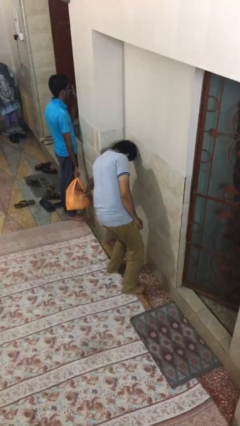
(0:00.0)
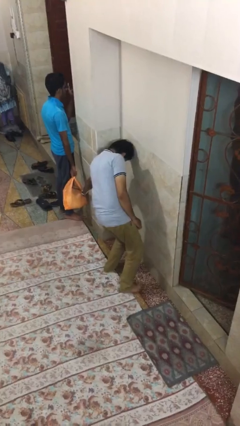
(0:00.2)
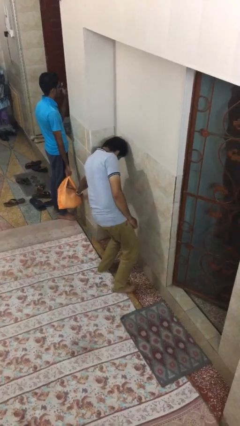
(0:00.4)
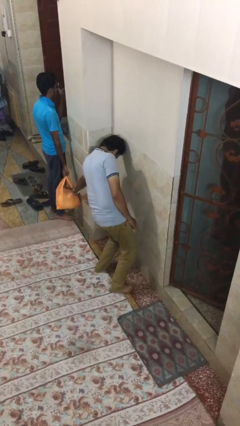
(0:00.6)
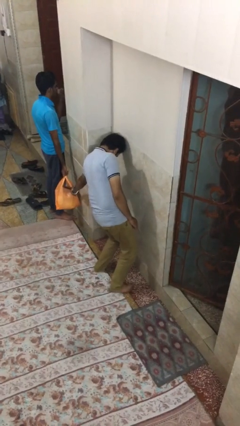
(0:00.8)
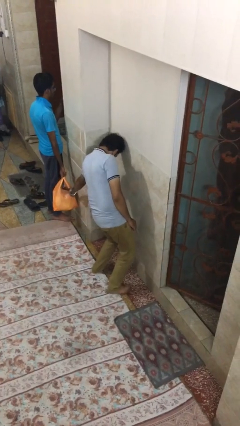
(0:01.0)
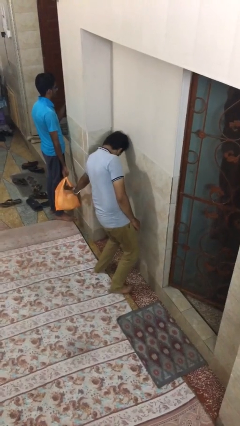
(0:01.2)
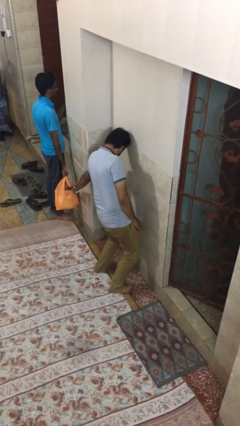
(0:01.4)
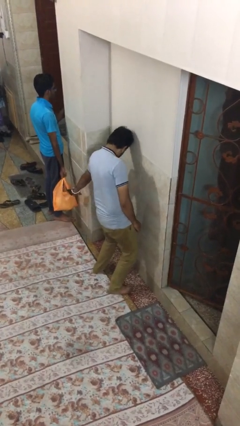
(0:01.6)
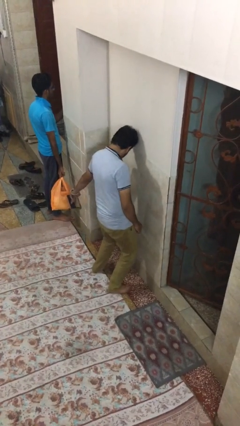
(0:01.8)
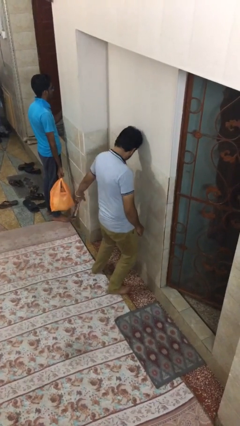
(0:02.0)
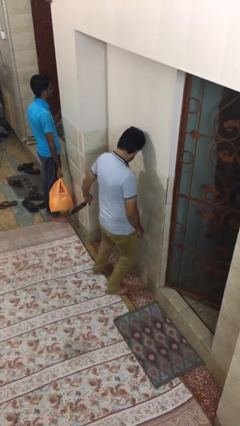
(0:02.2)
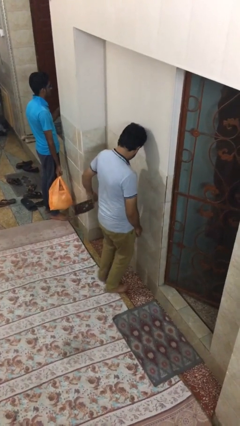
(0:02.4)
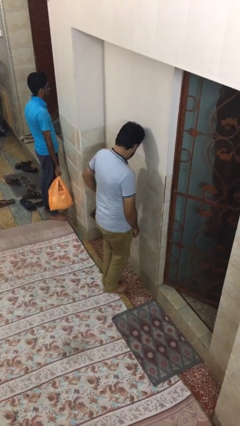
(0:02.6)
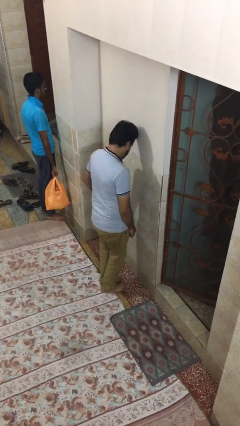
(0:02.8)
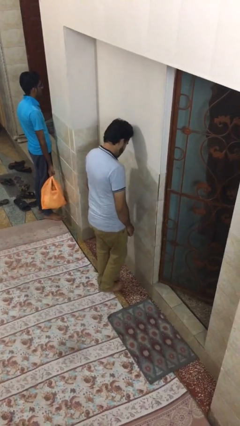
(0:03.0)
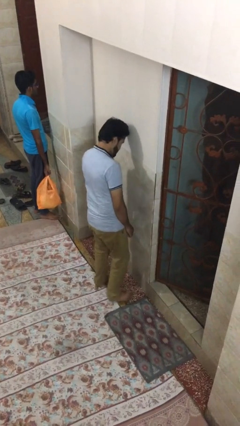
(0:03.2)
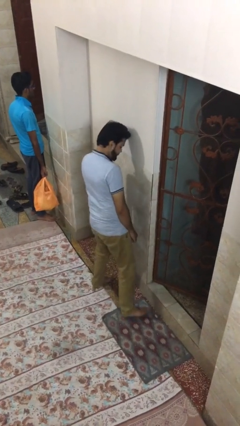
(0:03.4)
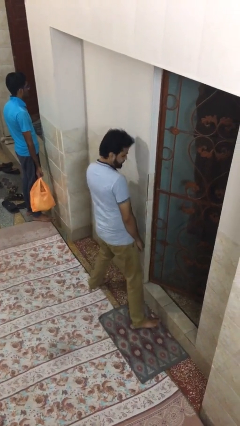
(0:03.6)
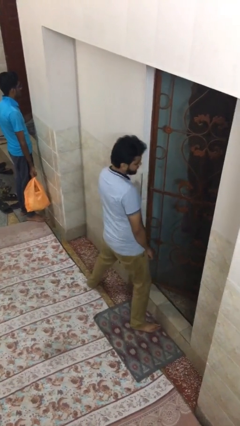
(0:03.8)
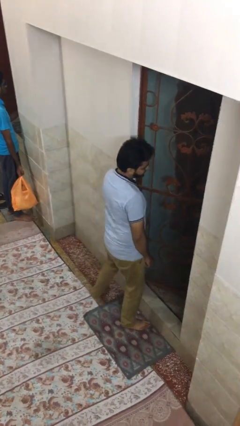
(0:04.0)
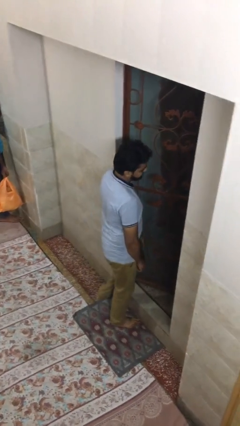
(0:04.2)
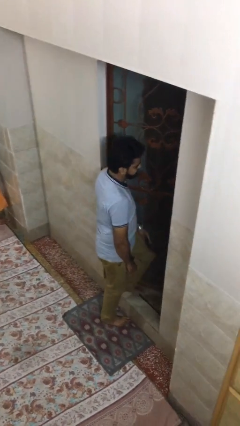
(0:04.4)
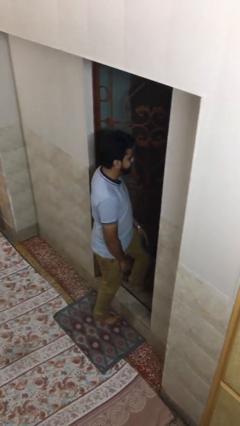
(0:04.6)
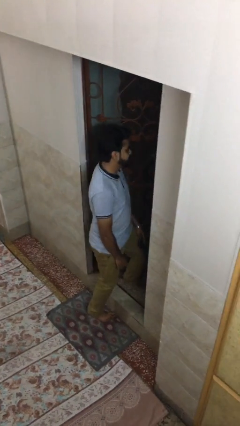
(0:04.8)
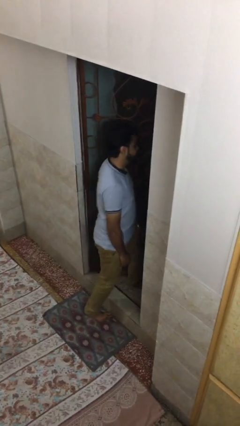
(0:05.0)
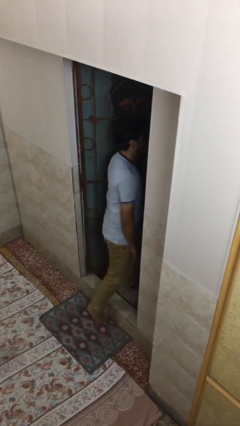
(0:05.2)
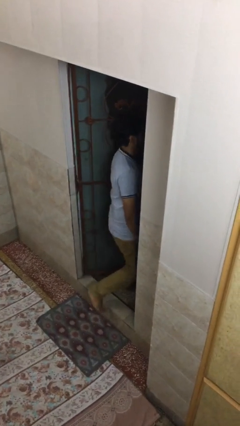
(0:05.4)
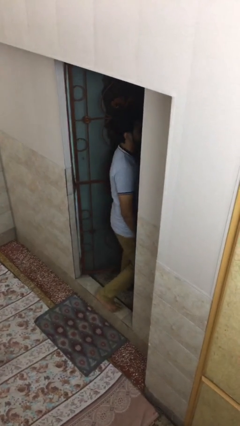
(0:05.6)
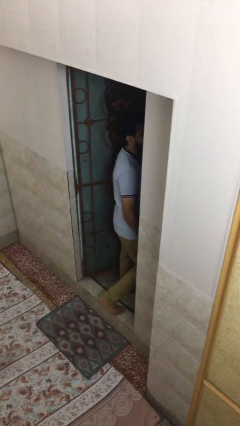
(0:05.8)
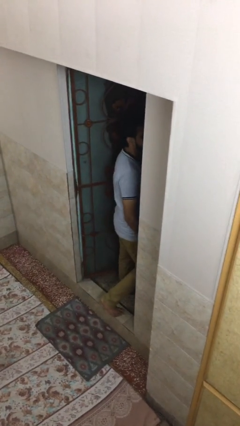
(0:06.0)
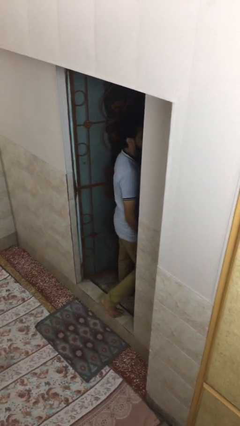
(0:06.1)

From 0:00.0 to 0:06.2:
person steals object from person

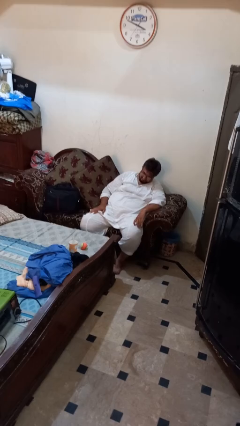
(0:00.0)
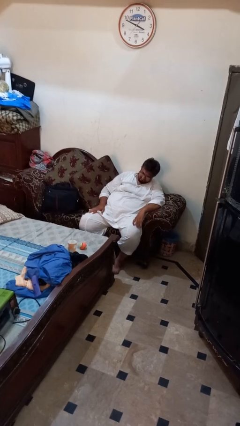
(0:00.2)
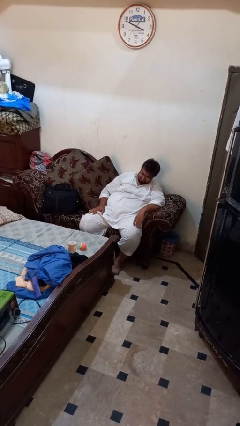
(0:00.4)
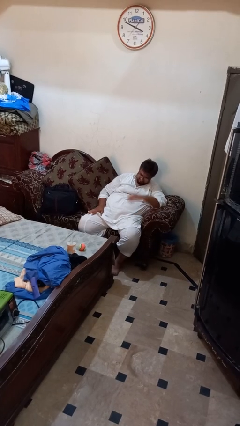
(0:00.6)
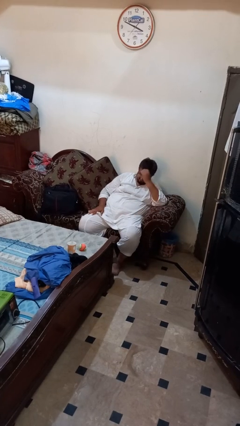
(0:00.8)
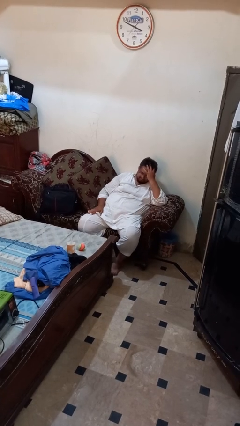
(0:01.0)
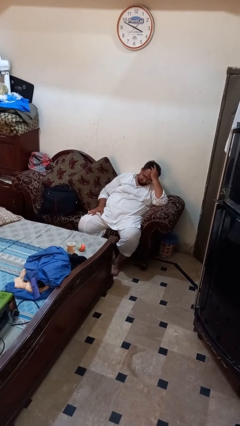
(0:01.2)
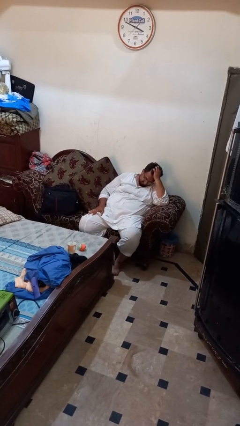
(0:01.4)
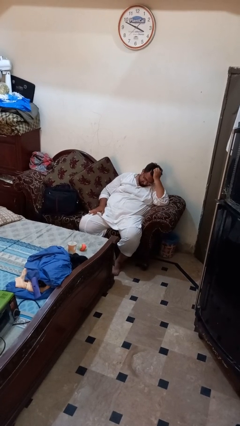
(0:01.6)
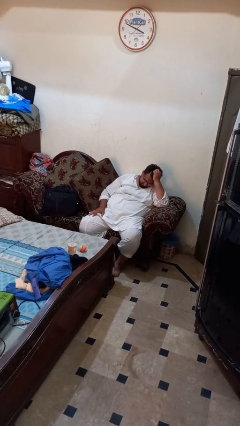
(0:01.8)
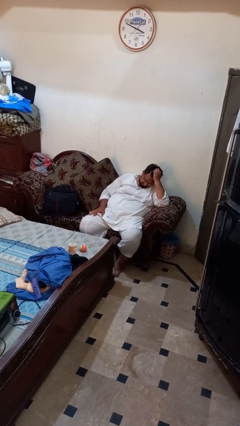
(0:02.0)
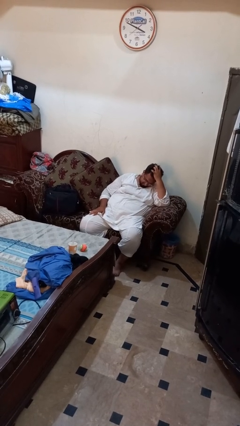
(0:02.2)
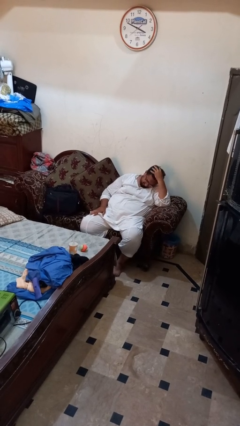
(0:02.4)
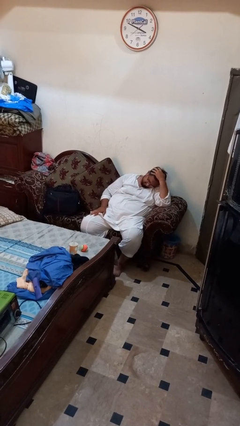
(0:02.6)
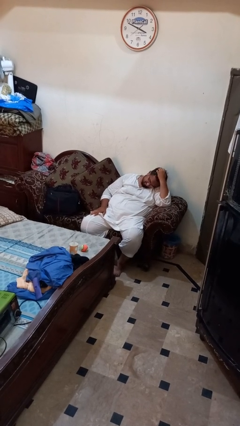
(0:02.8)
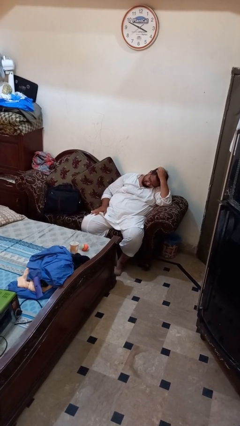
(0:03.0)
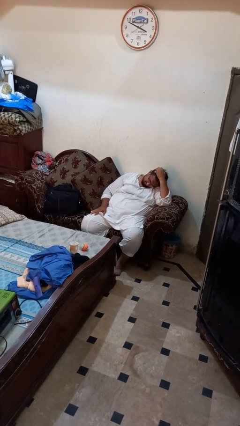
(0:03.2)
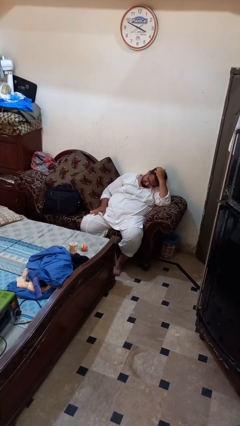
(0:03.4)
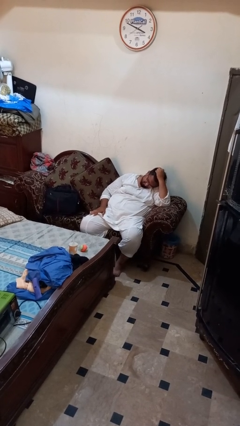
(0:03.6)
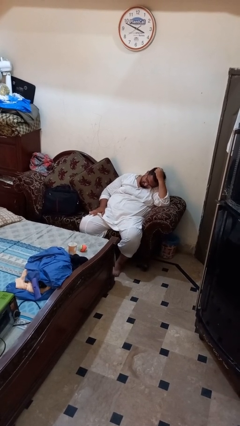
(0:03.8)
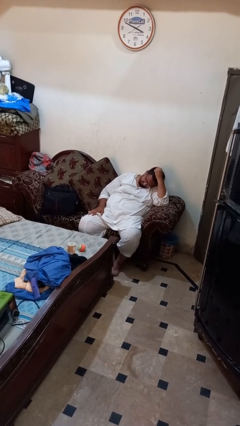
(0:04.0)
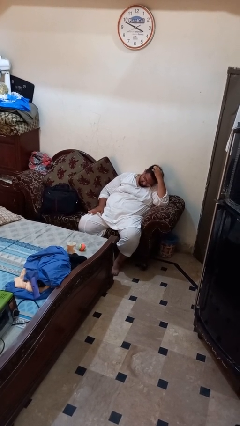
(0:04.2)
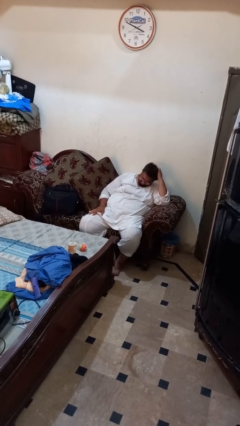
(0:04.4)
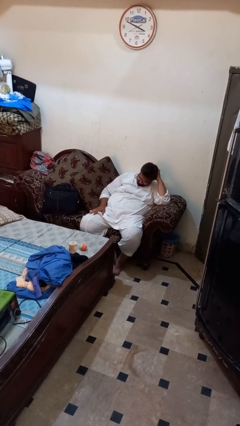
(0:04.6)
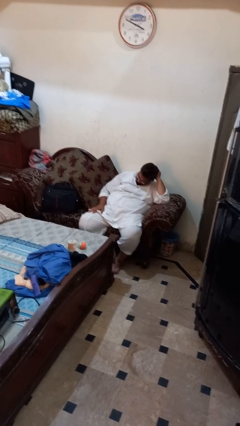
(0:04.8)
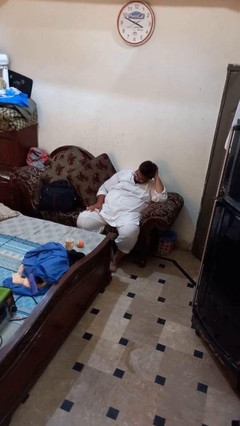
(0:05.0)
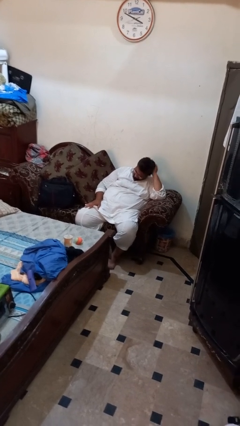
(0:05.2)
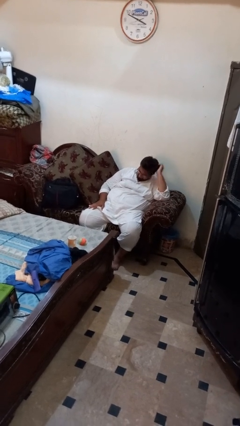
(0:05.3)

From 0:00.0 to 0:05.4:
person strokes hair

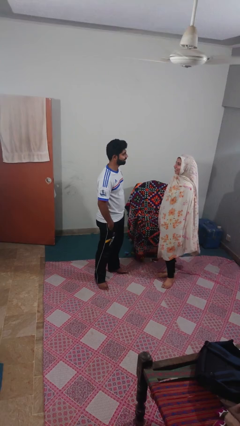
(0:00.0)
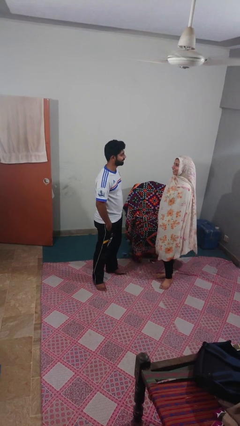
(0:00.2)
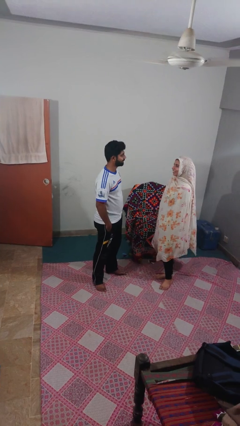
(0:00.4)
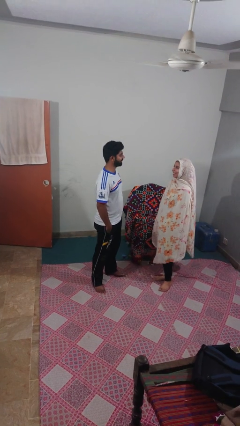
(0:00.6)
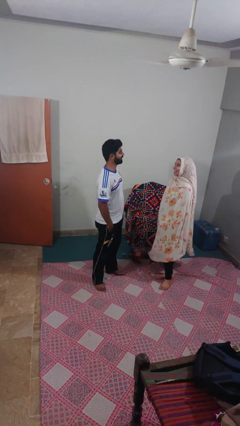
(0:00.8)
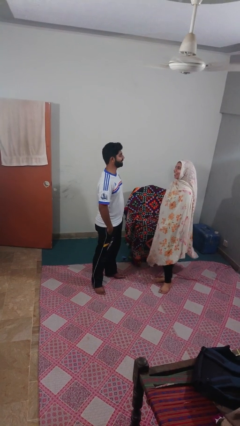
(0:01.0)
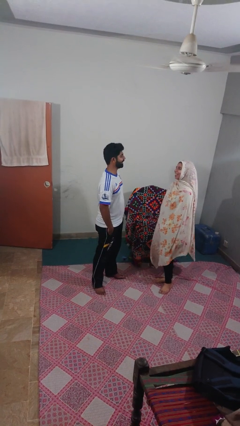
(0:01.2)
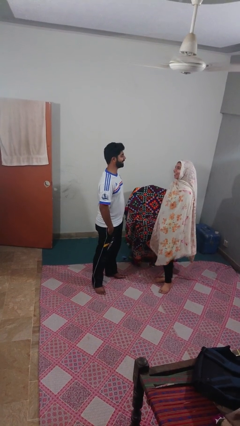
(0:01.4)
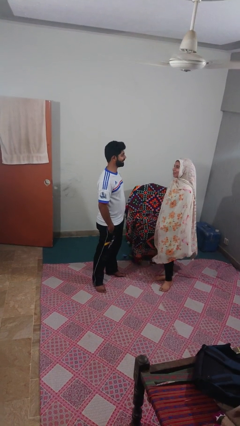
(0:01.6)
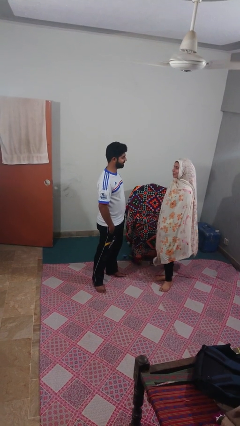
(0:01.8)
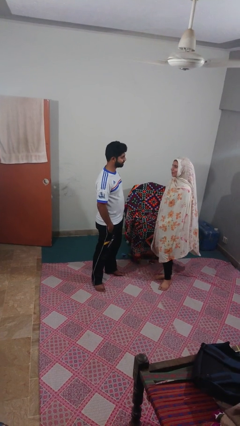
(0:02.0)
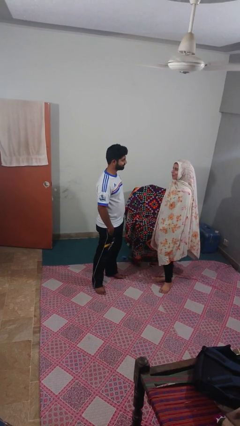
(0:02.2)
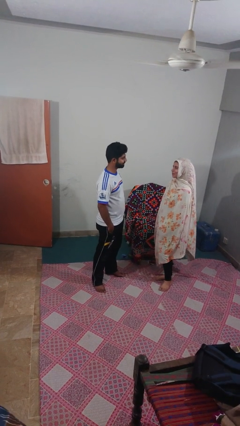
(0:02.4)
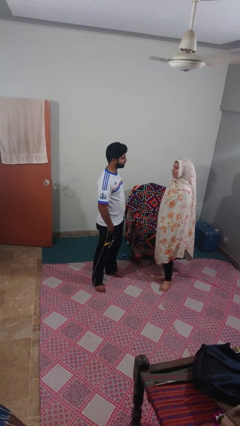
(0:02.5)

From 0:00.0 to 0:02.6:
person laughs with person

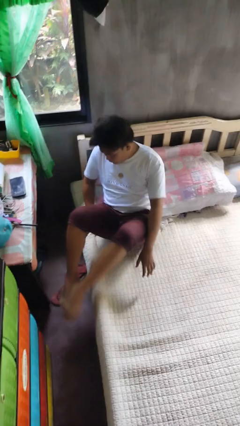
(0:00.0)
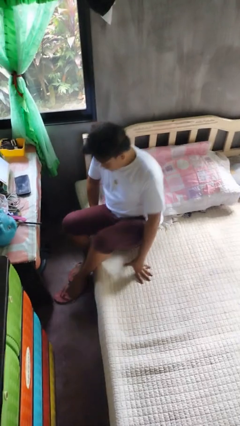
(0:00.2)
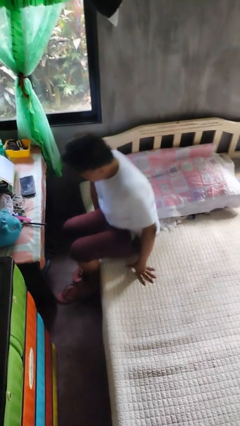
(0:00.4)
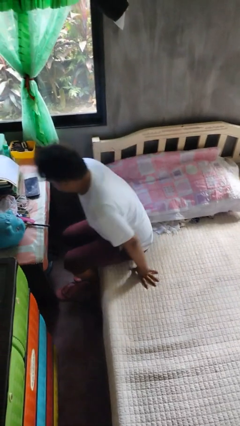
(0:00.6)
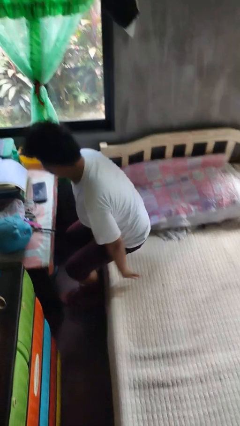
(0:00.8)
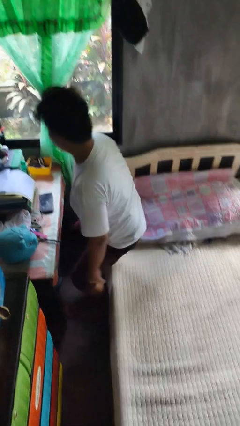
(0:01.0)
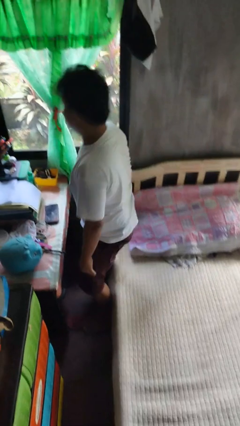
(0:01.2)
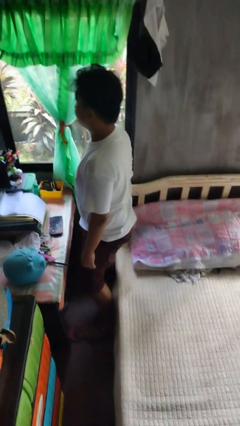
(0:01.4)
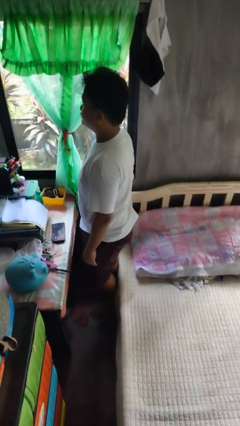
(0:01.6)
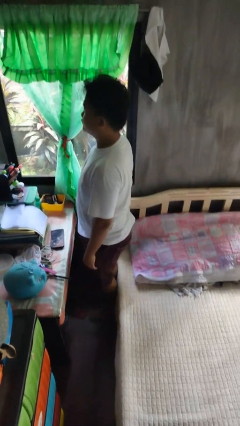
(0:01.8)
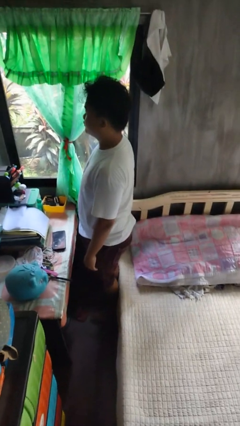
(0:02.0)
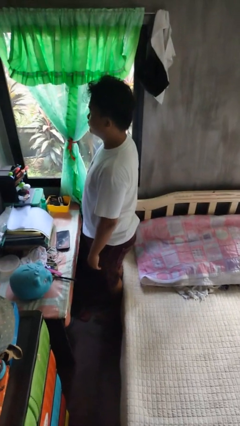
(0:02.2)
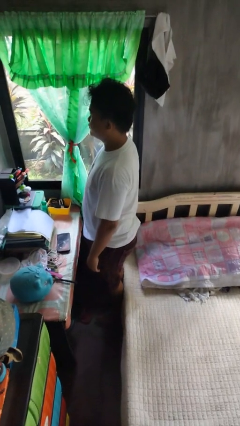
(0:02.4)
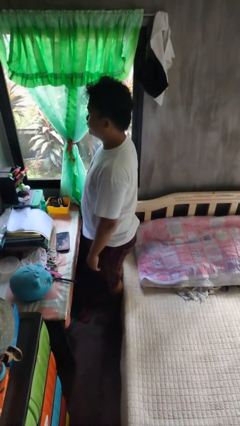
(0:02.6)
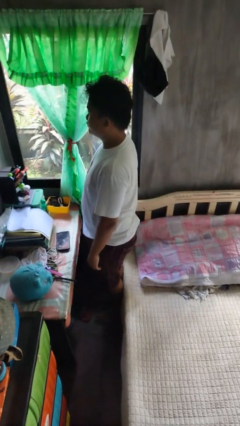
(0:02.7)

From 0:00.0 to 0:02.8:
person stands up

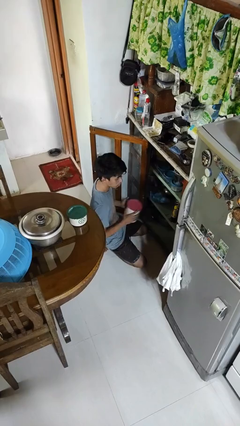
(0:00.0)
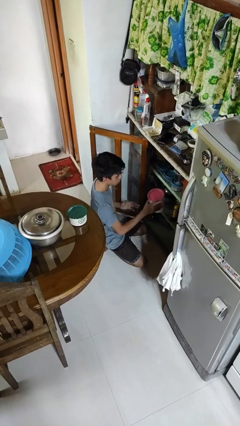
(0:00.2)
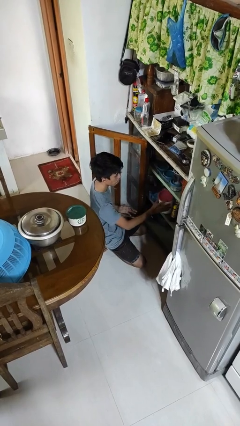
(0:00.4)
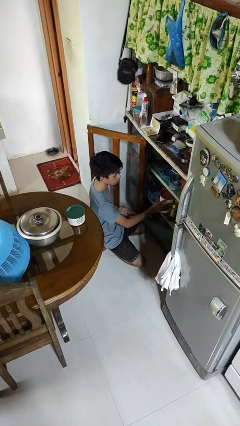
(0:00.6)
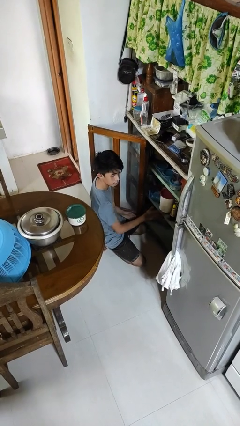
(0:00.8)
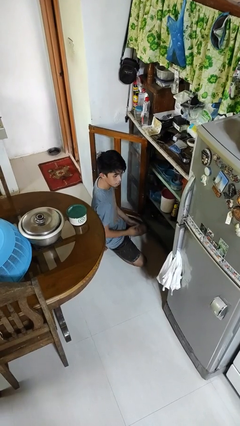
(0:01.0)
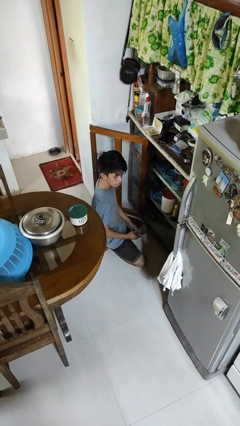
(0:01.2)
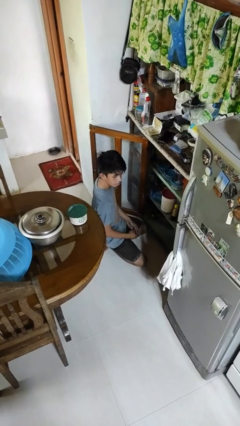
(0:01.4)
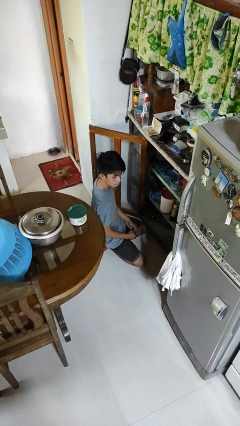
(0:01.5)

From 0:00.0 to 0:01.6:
person puts down object into cabinet
